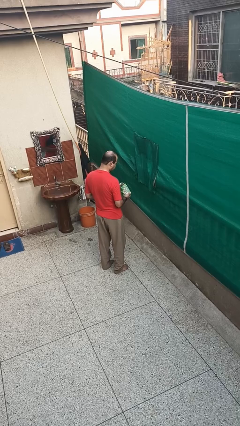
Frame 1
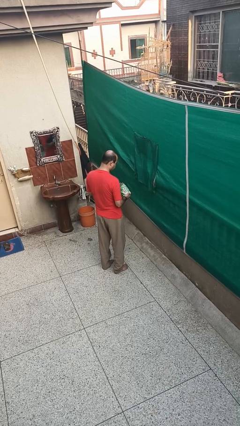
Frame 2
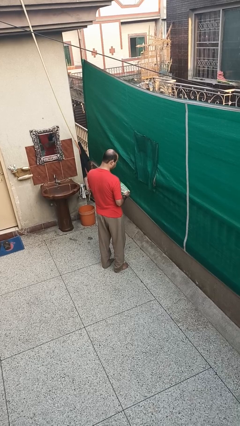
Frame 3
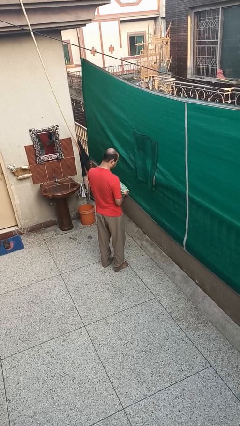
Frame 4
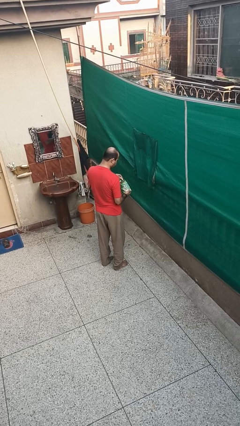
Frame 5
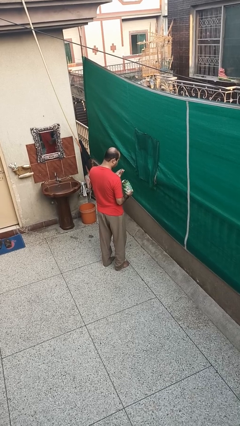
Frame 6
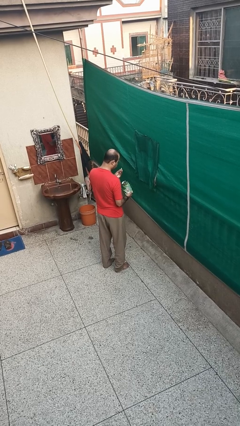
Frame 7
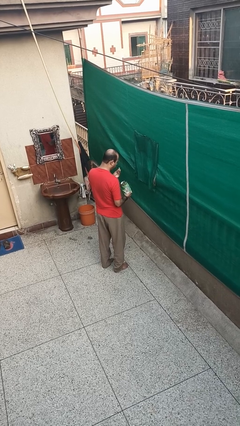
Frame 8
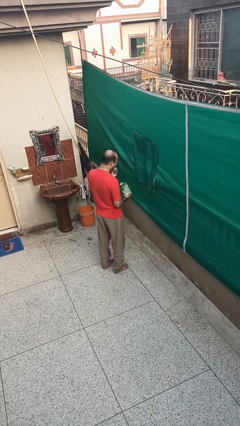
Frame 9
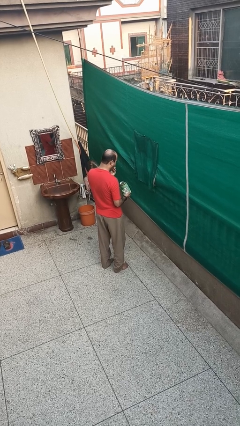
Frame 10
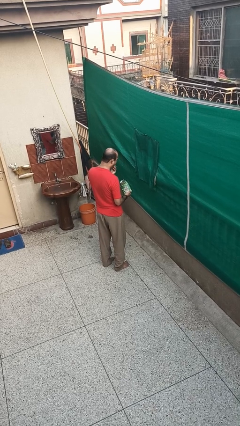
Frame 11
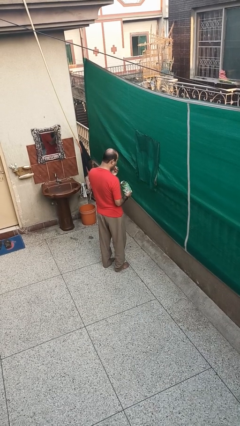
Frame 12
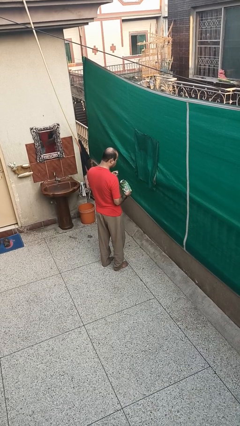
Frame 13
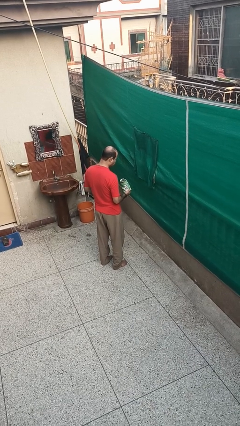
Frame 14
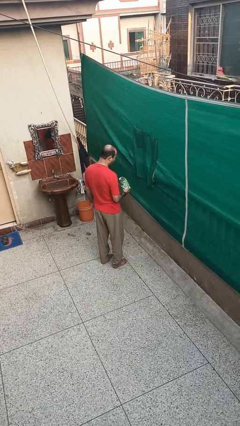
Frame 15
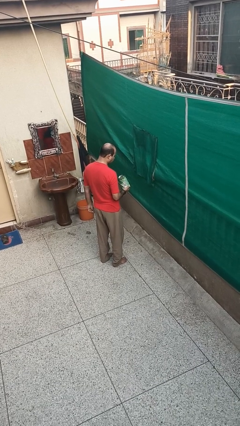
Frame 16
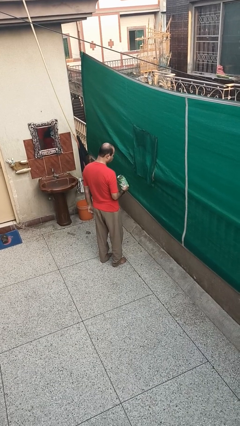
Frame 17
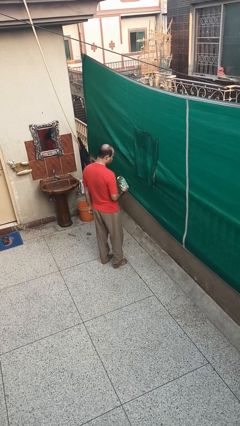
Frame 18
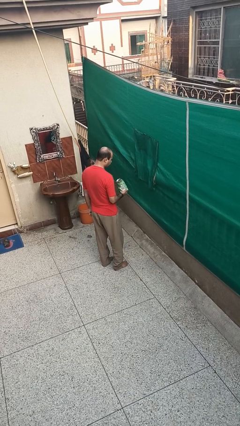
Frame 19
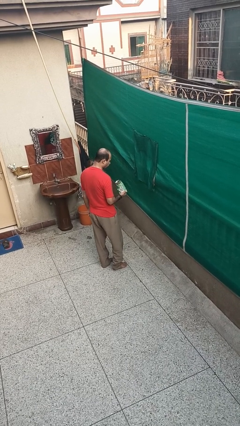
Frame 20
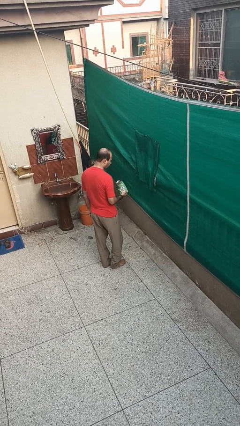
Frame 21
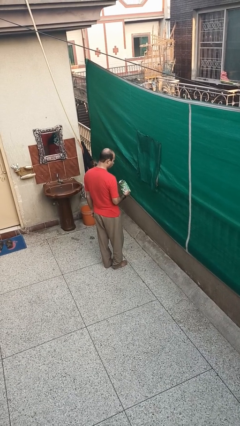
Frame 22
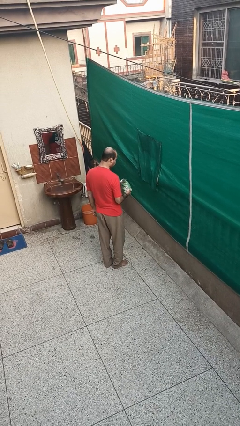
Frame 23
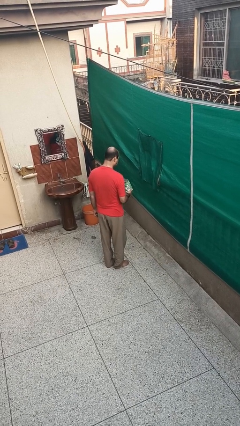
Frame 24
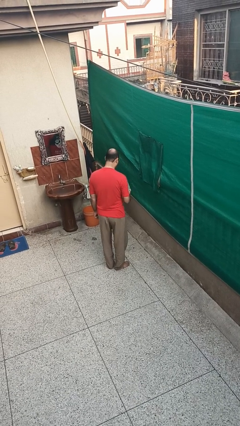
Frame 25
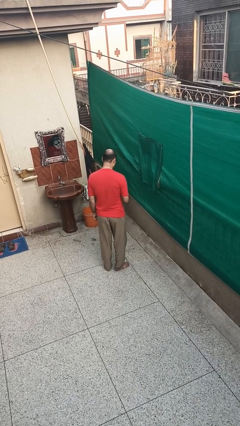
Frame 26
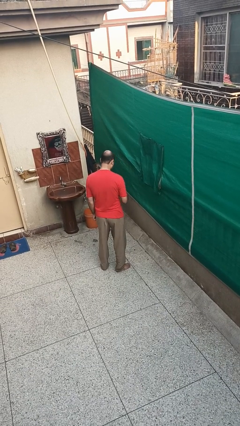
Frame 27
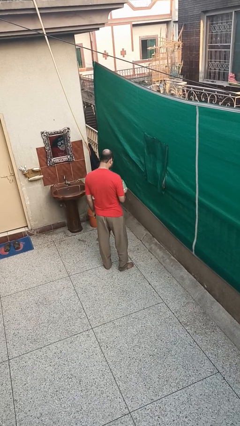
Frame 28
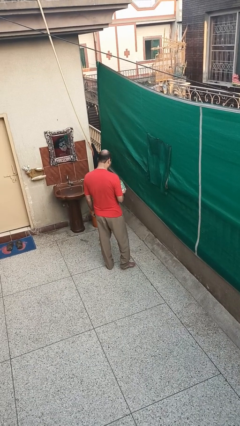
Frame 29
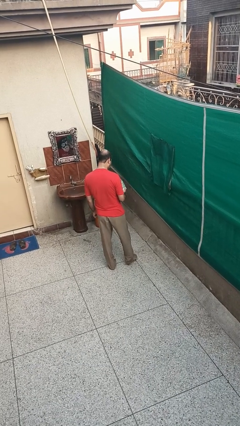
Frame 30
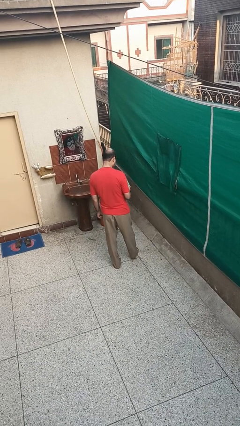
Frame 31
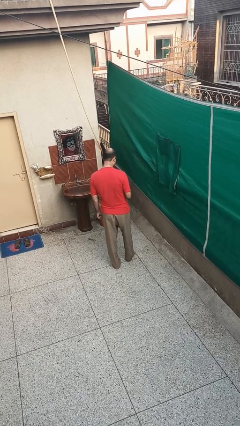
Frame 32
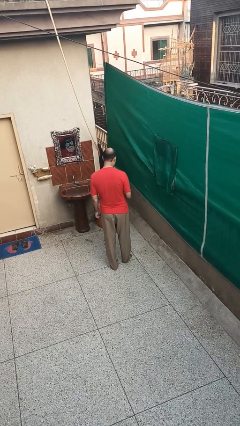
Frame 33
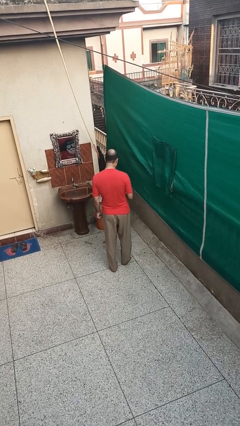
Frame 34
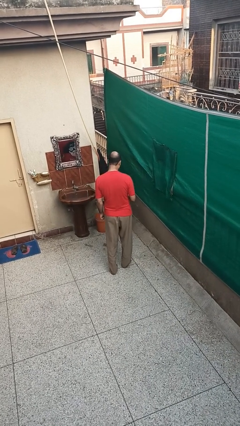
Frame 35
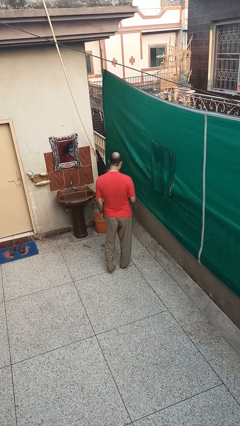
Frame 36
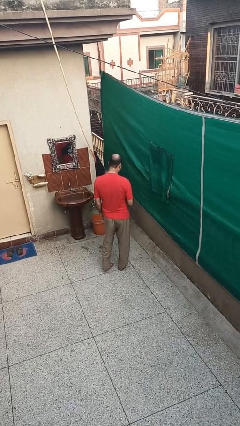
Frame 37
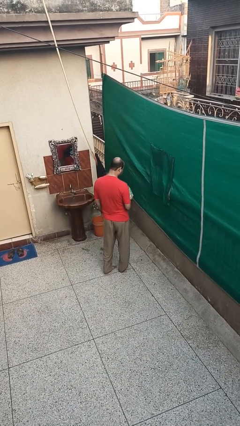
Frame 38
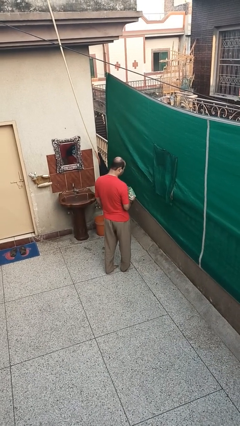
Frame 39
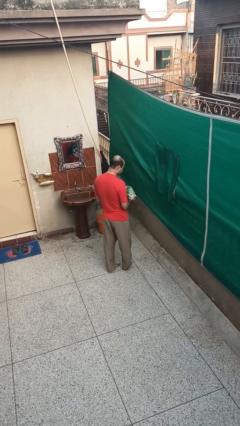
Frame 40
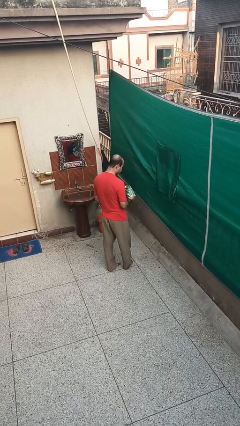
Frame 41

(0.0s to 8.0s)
person eats snack from bag

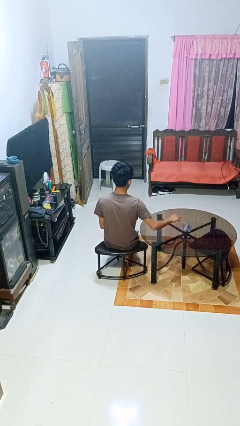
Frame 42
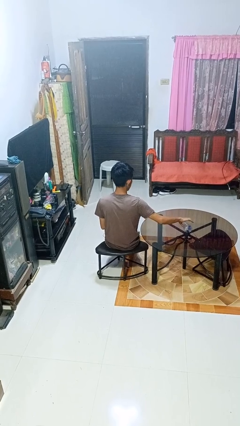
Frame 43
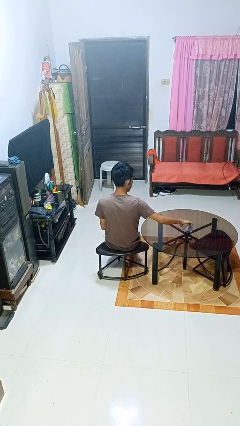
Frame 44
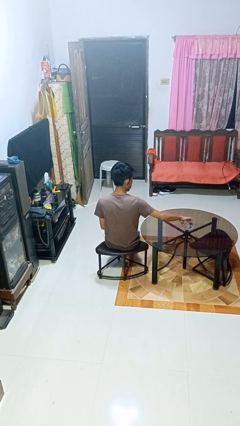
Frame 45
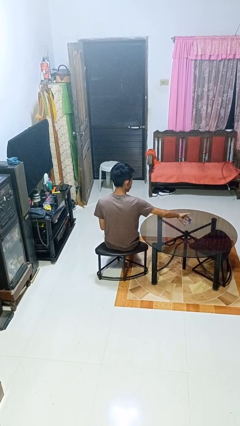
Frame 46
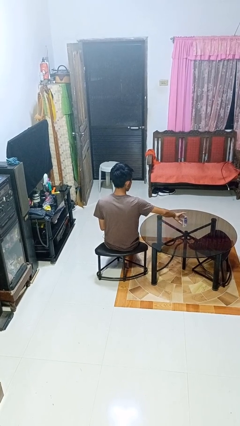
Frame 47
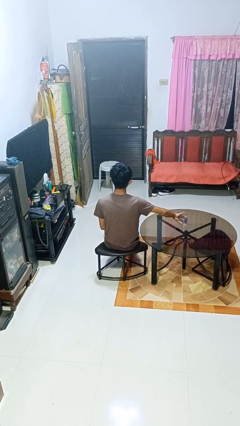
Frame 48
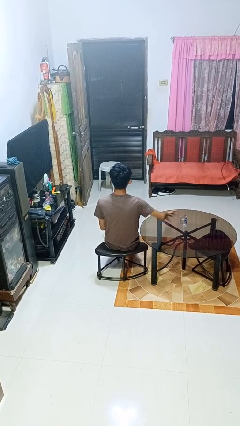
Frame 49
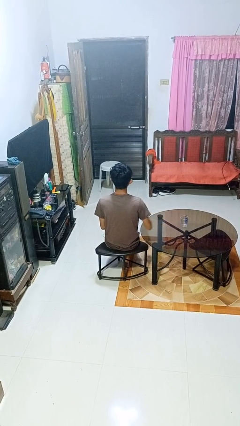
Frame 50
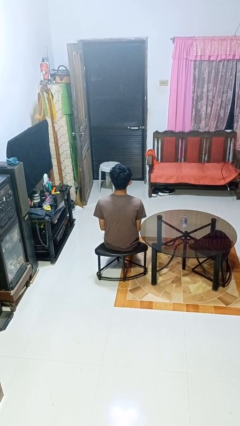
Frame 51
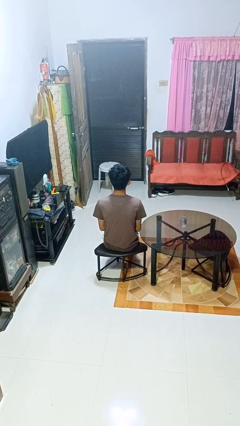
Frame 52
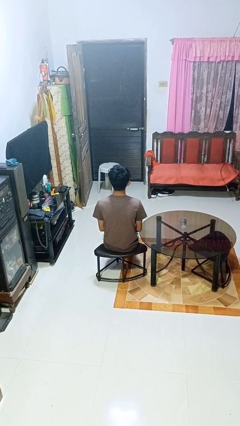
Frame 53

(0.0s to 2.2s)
person sets upright glass

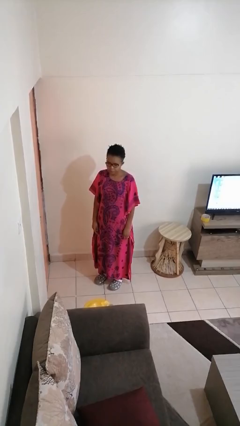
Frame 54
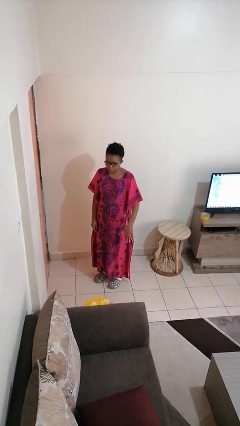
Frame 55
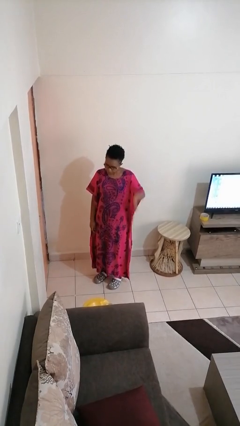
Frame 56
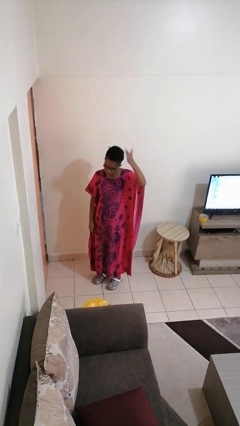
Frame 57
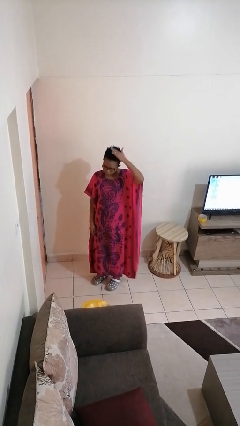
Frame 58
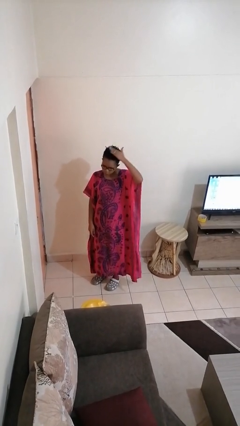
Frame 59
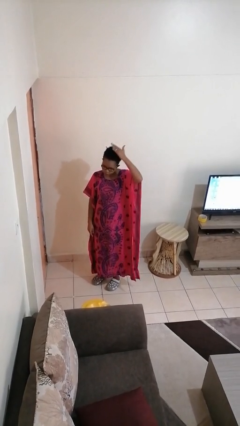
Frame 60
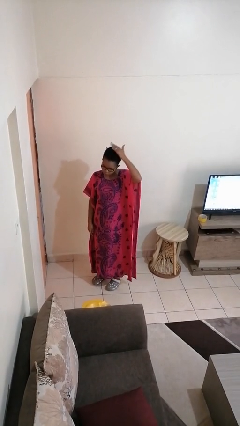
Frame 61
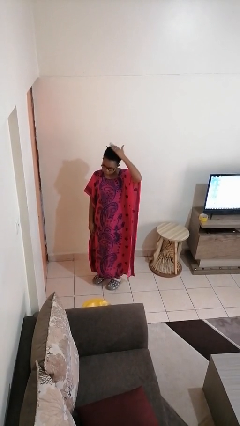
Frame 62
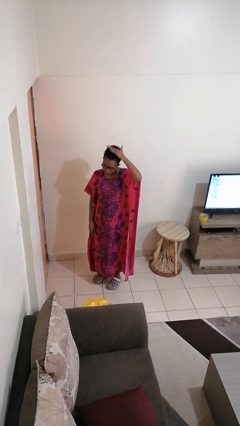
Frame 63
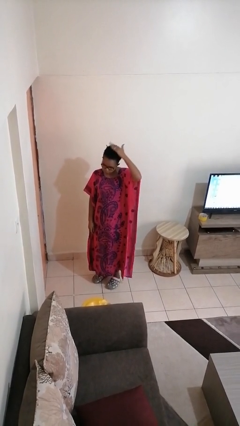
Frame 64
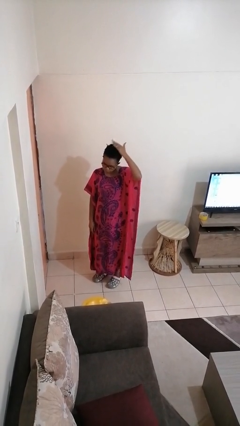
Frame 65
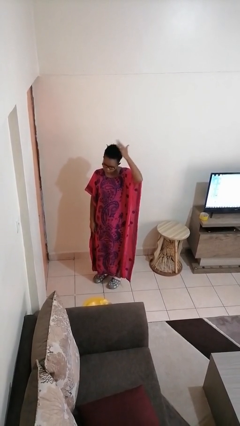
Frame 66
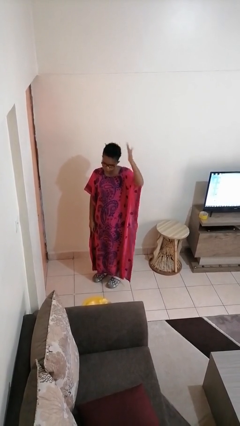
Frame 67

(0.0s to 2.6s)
person pats head

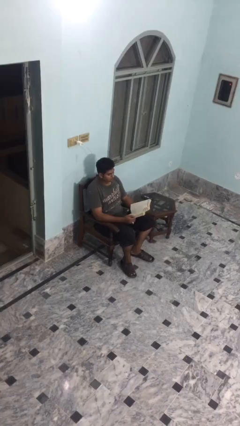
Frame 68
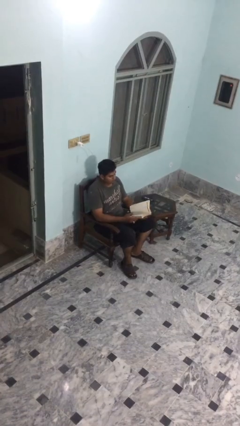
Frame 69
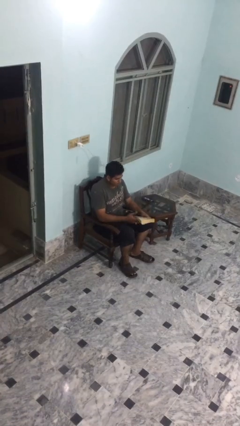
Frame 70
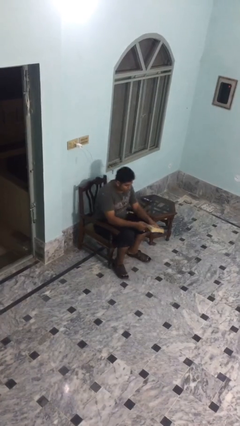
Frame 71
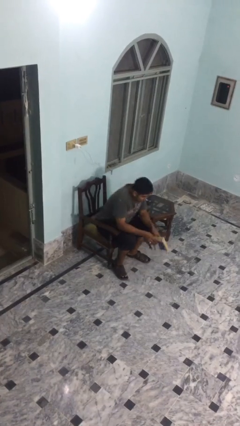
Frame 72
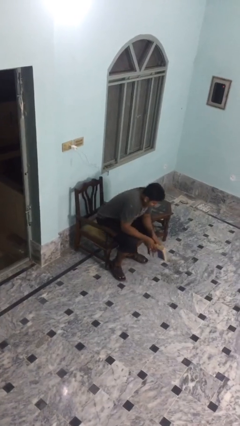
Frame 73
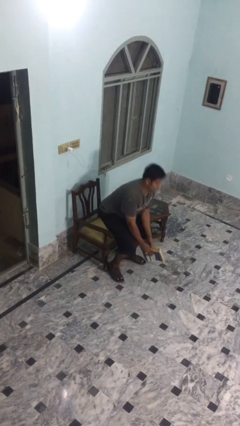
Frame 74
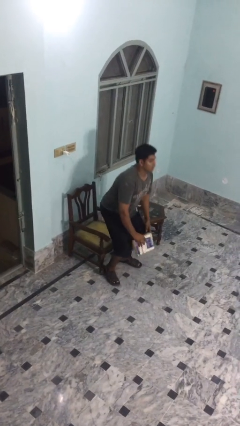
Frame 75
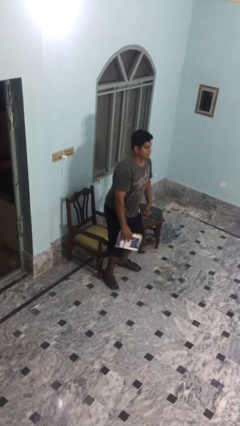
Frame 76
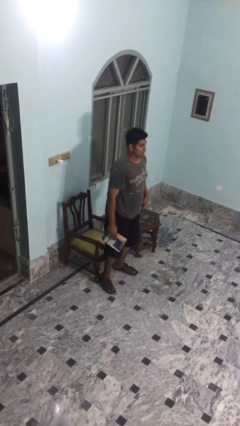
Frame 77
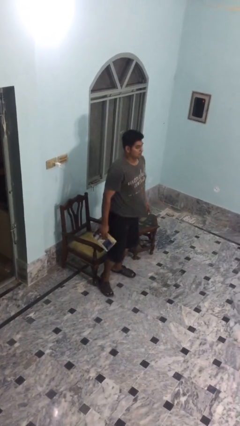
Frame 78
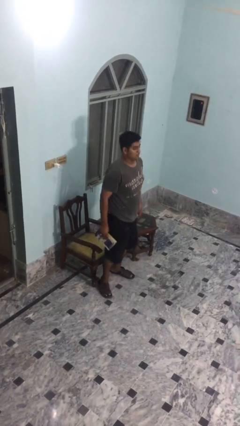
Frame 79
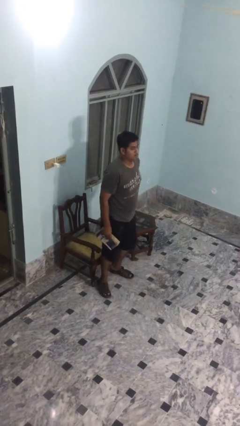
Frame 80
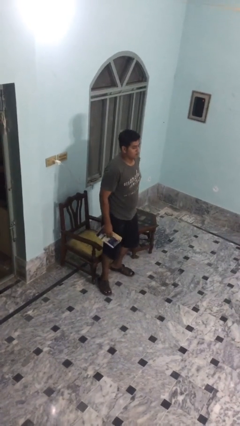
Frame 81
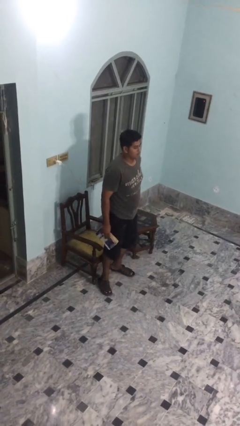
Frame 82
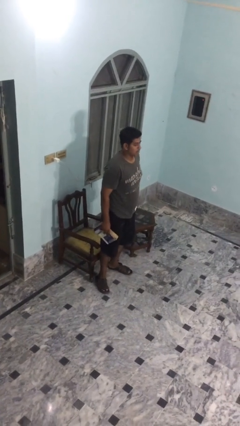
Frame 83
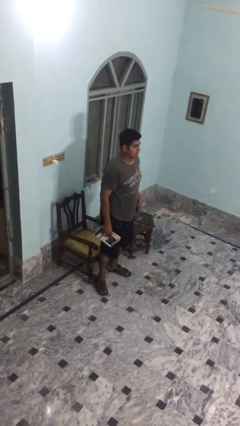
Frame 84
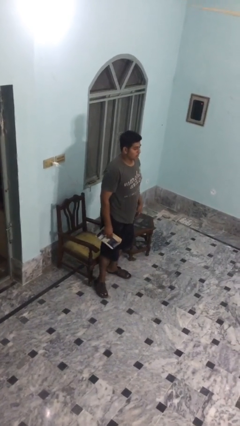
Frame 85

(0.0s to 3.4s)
person stands up

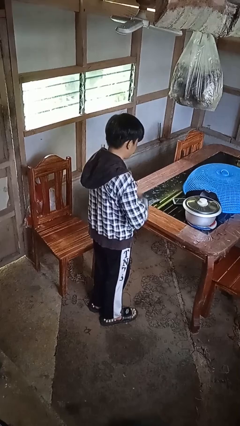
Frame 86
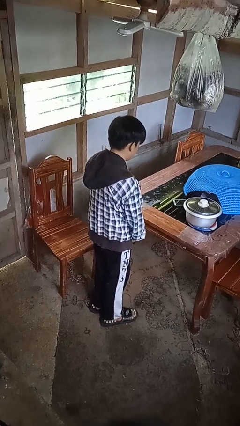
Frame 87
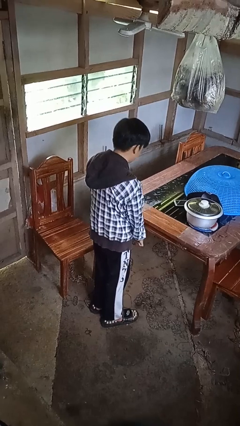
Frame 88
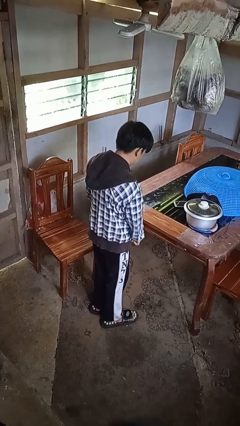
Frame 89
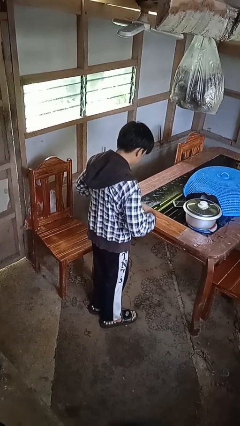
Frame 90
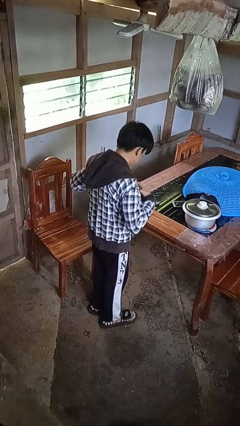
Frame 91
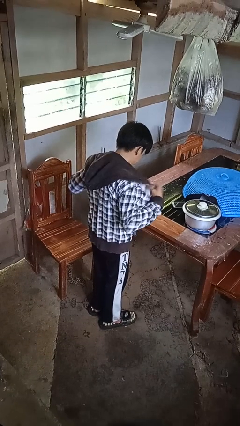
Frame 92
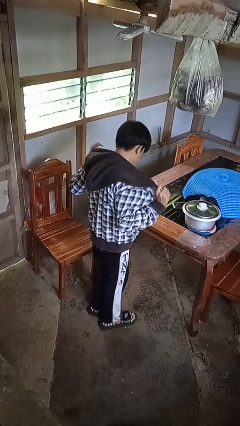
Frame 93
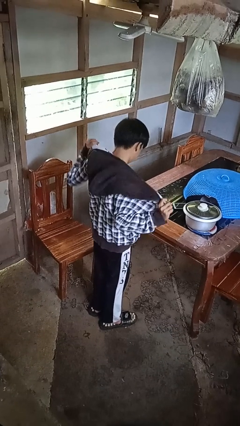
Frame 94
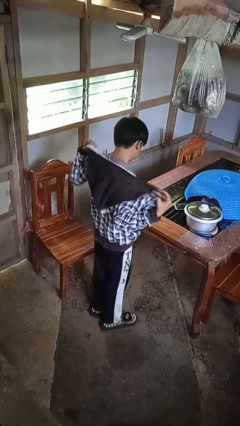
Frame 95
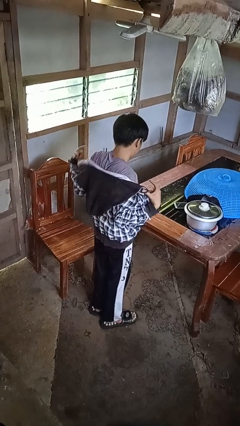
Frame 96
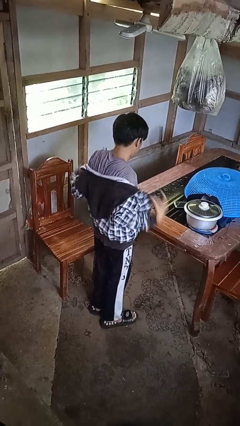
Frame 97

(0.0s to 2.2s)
person takes off jacket
